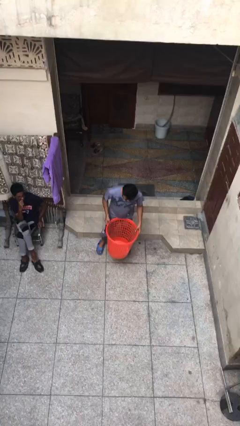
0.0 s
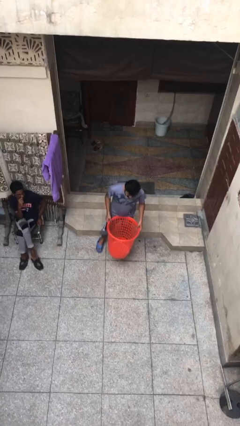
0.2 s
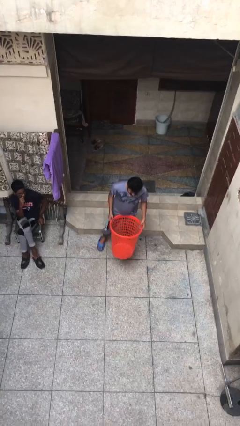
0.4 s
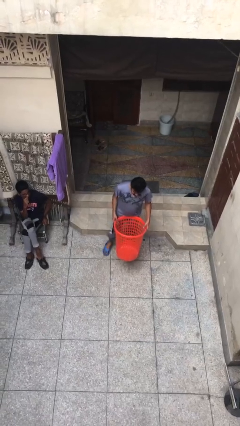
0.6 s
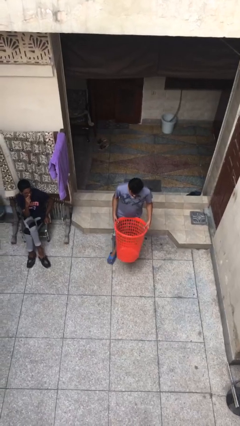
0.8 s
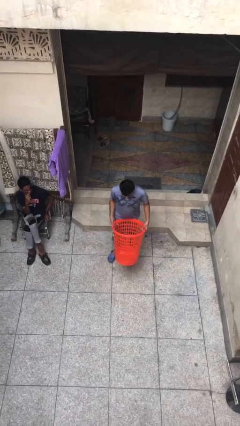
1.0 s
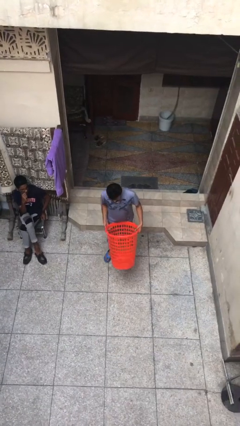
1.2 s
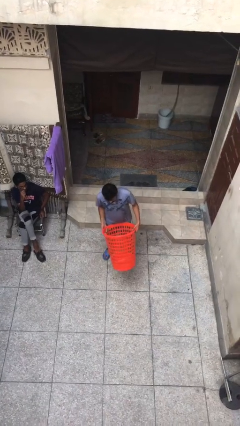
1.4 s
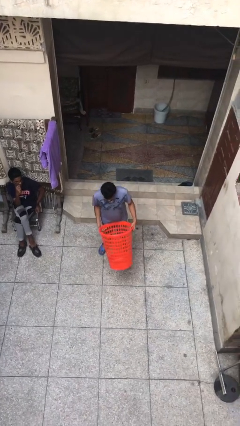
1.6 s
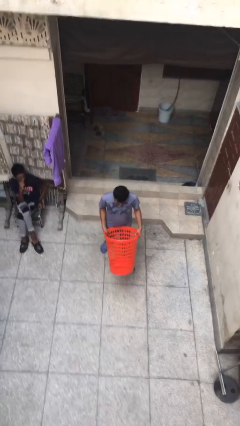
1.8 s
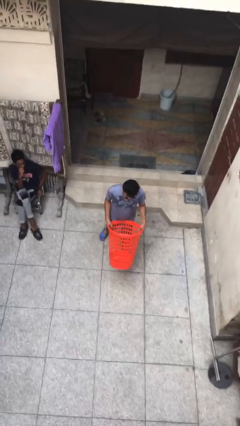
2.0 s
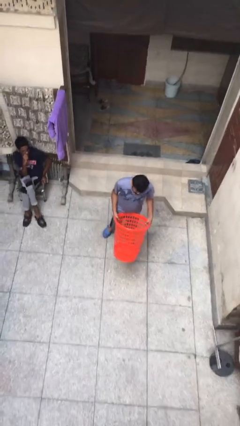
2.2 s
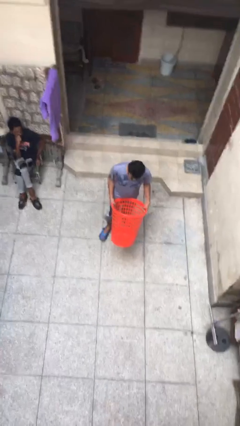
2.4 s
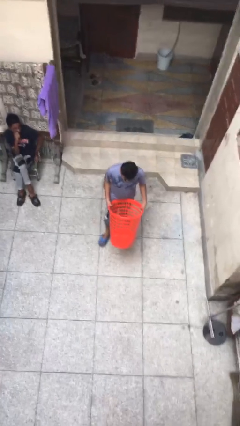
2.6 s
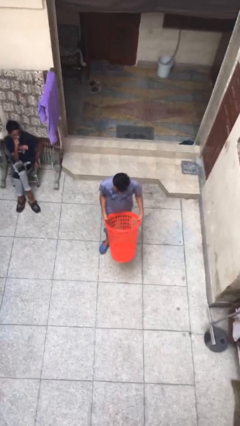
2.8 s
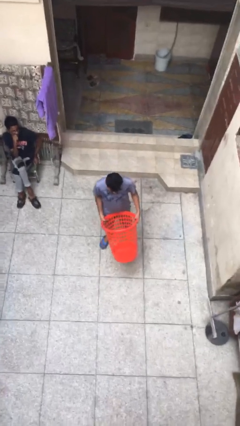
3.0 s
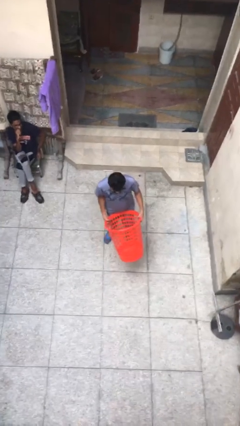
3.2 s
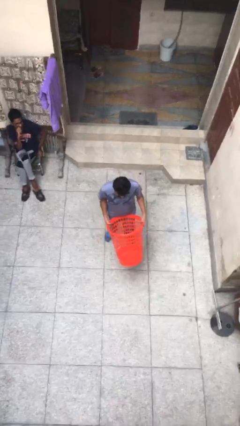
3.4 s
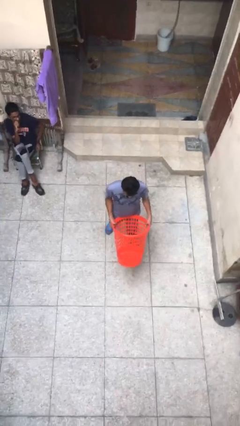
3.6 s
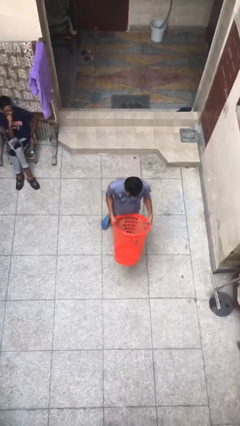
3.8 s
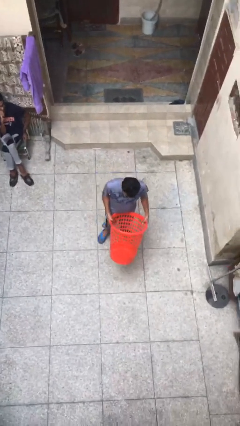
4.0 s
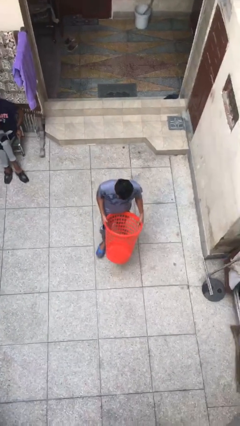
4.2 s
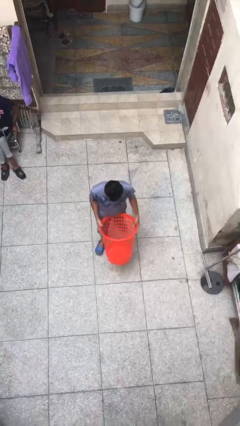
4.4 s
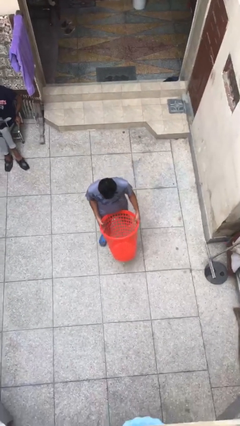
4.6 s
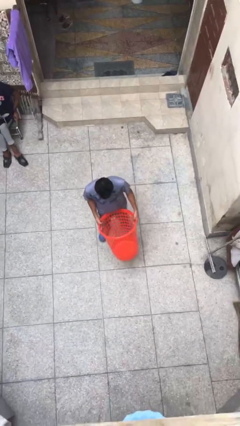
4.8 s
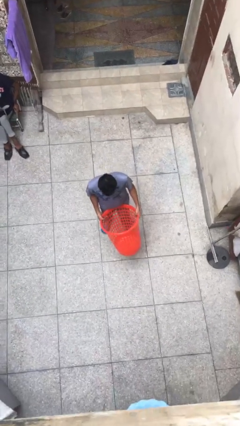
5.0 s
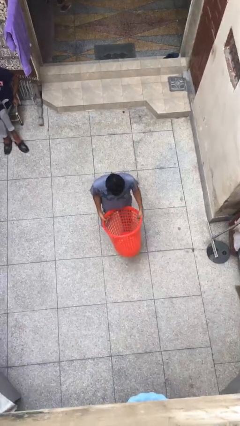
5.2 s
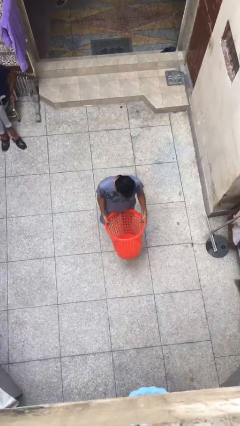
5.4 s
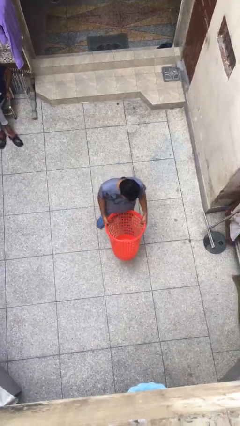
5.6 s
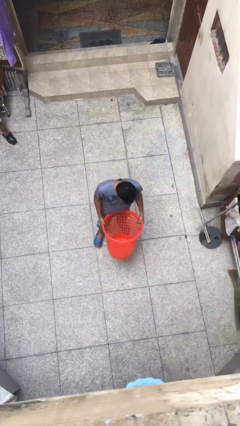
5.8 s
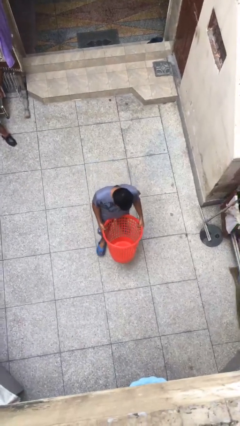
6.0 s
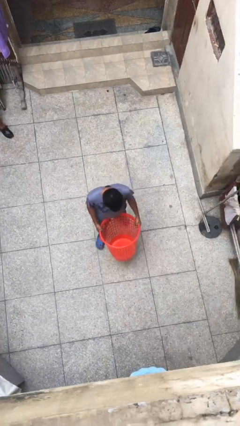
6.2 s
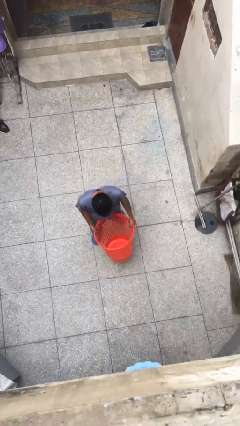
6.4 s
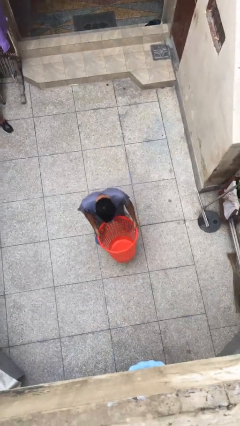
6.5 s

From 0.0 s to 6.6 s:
person carries heavy object

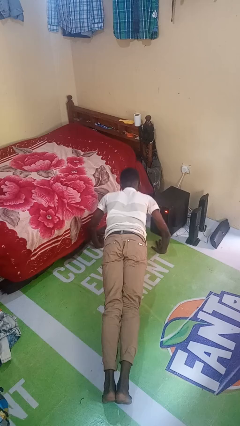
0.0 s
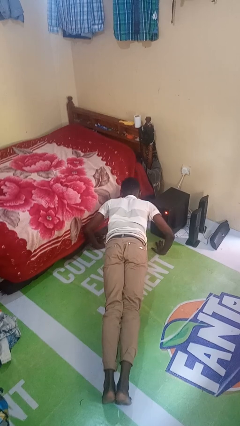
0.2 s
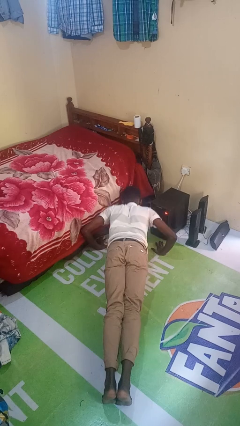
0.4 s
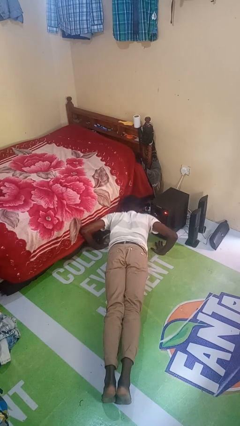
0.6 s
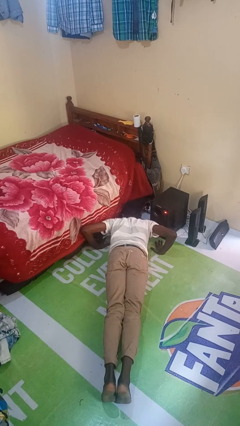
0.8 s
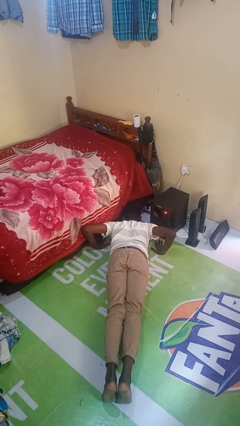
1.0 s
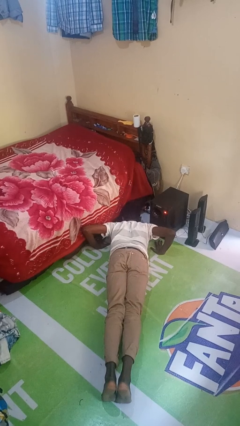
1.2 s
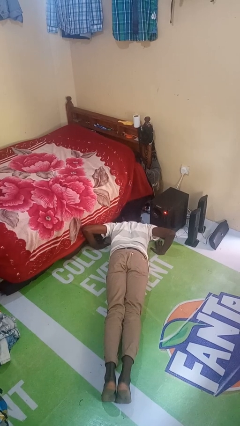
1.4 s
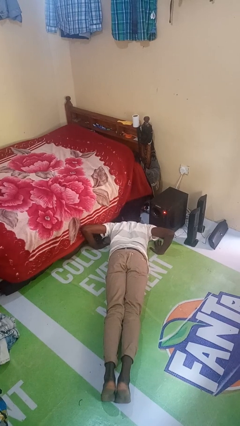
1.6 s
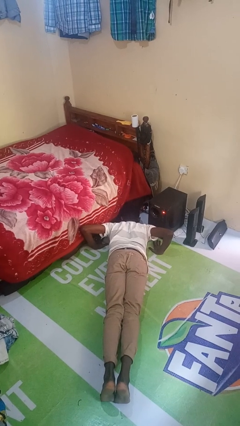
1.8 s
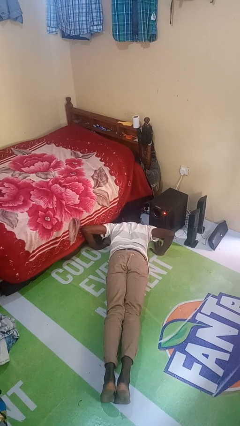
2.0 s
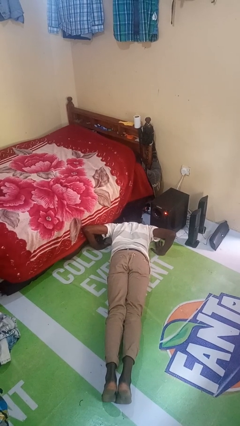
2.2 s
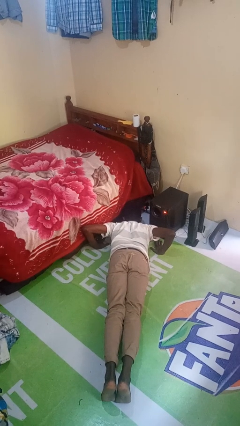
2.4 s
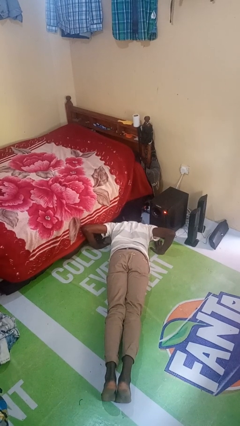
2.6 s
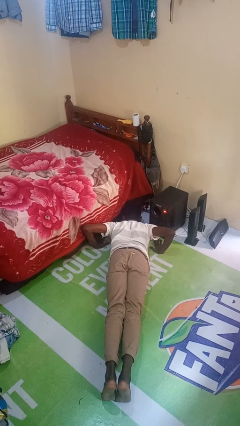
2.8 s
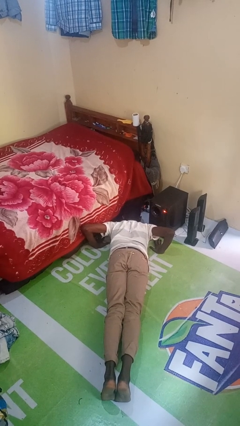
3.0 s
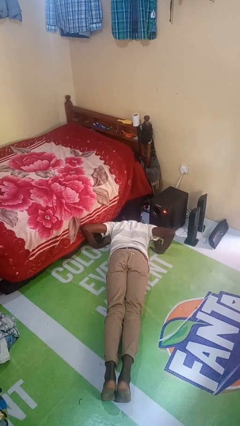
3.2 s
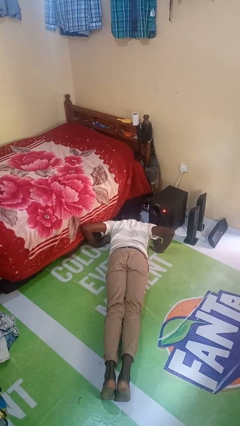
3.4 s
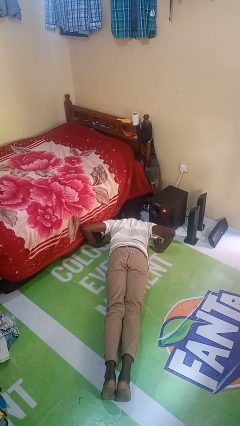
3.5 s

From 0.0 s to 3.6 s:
person exercises with pushup

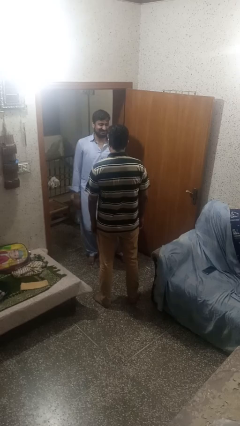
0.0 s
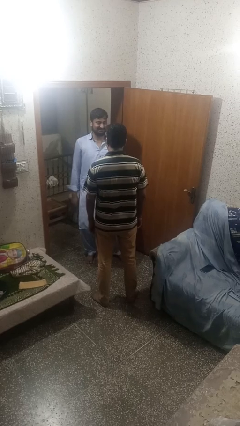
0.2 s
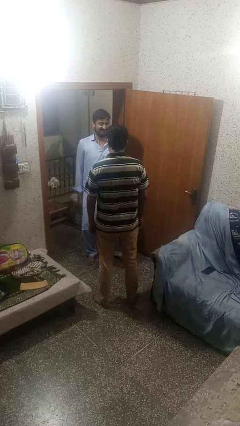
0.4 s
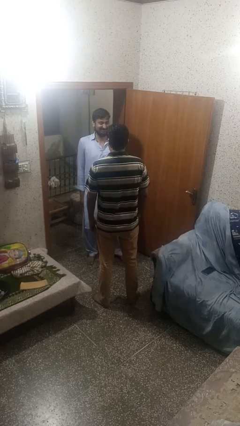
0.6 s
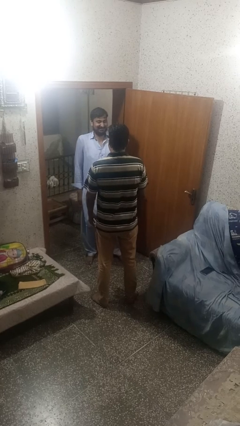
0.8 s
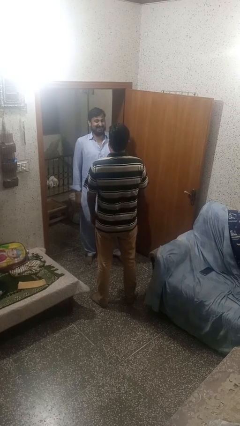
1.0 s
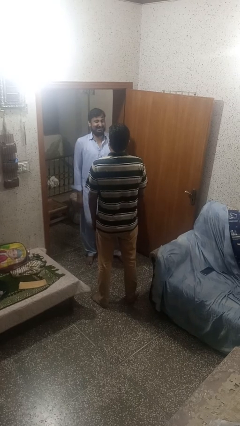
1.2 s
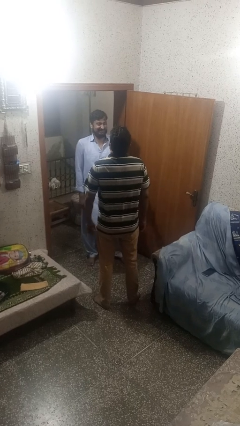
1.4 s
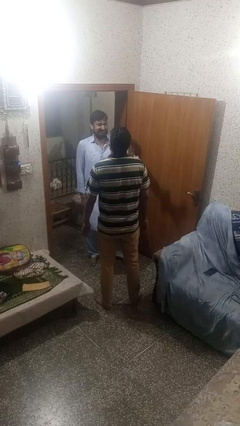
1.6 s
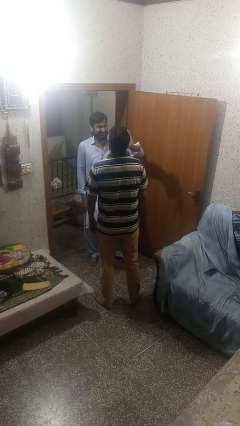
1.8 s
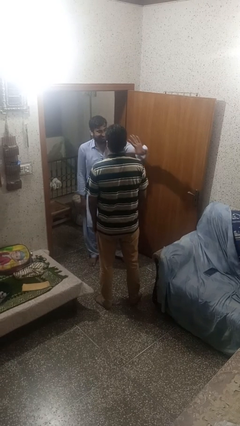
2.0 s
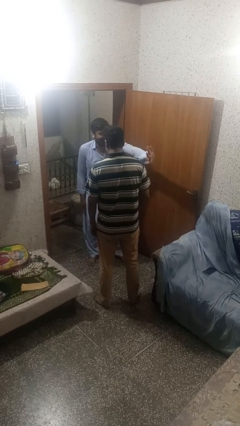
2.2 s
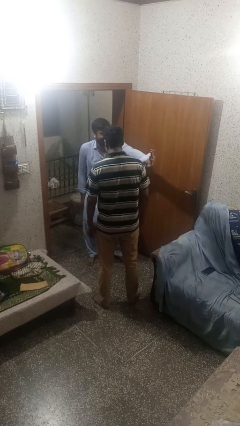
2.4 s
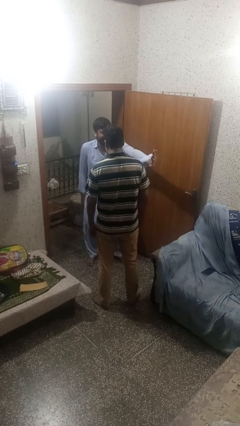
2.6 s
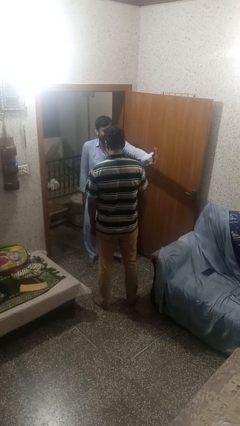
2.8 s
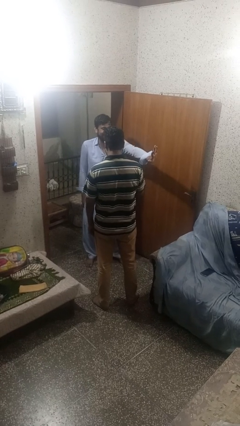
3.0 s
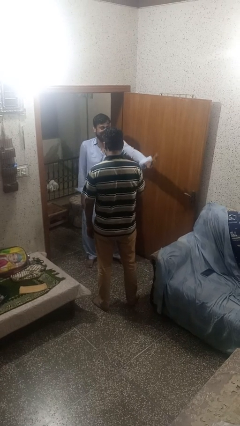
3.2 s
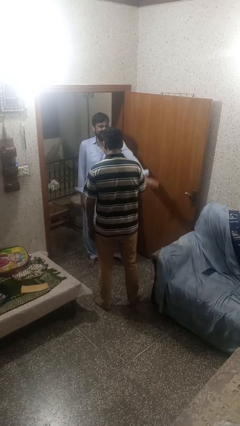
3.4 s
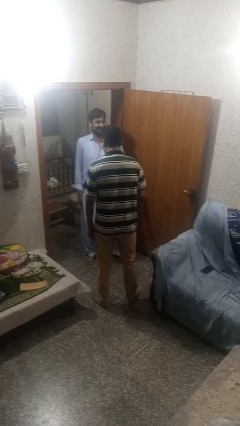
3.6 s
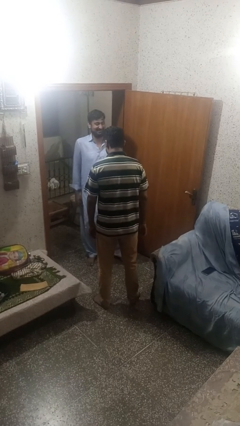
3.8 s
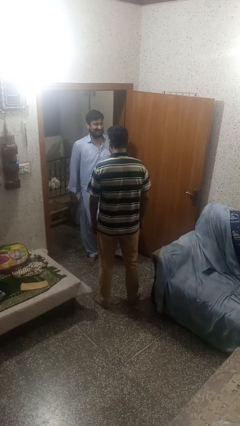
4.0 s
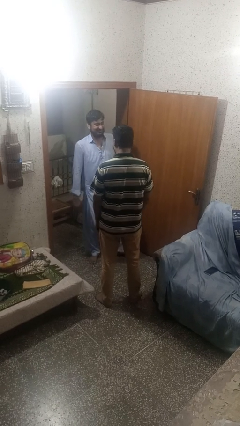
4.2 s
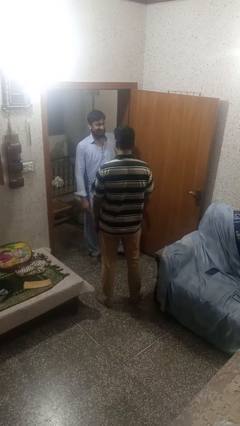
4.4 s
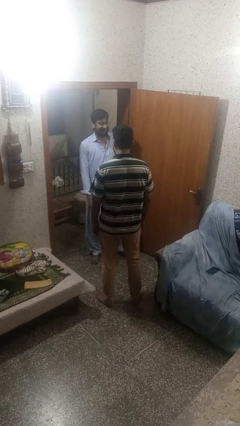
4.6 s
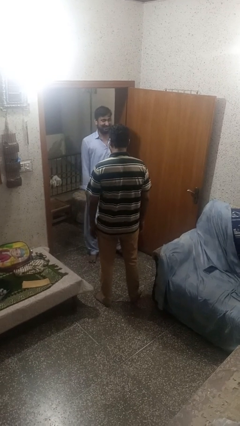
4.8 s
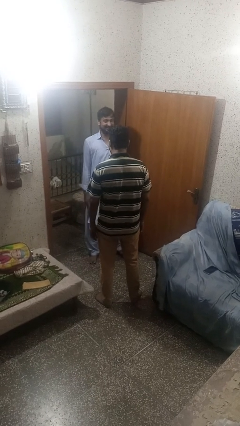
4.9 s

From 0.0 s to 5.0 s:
person laughs with person

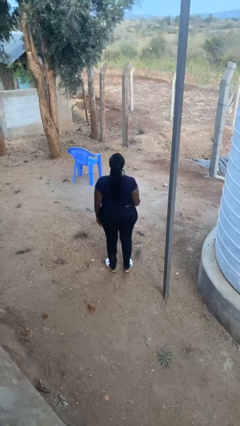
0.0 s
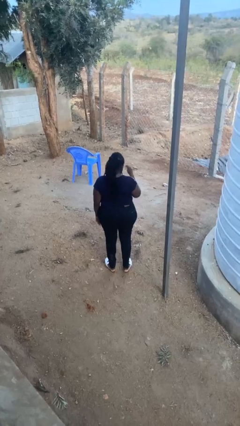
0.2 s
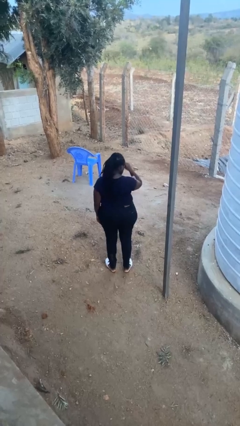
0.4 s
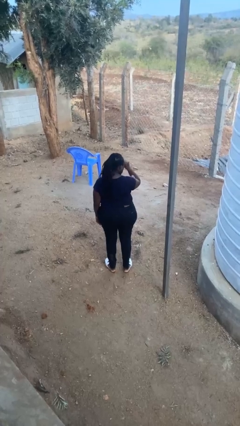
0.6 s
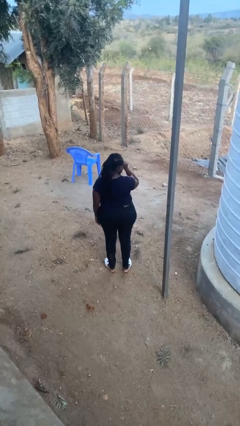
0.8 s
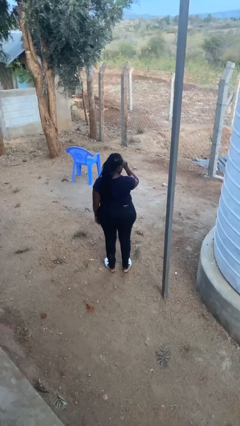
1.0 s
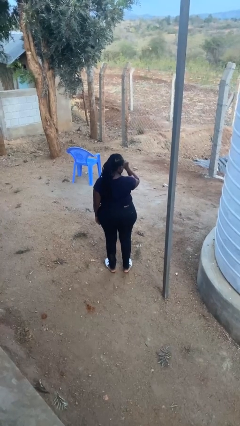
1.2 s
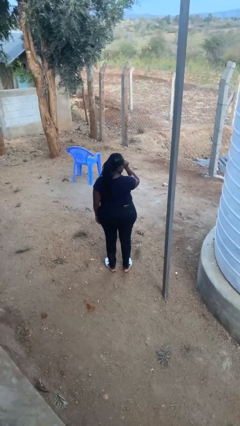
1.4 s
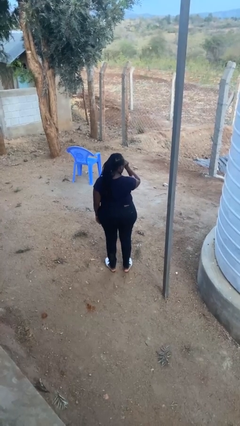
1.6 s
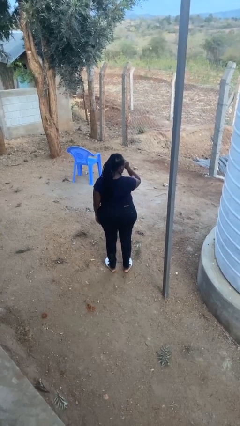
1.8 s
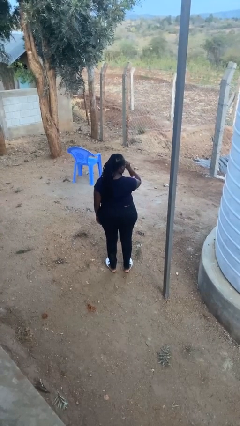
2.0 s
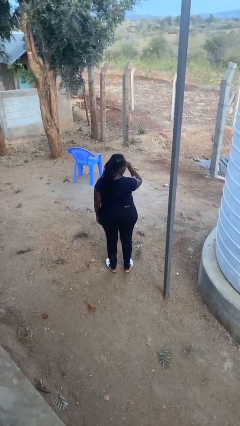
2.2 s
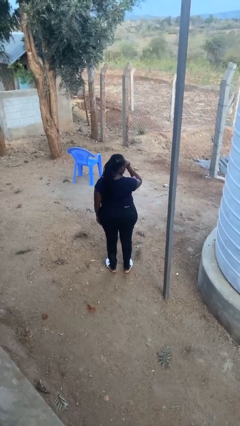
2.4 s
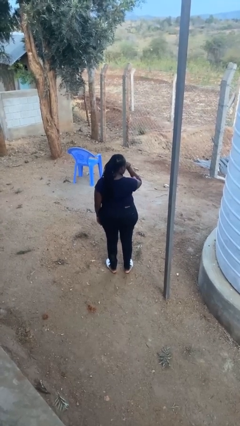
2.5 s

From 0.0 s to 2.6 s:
person rubs eyes

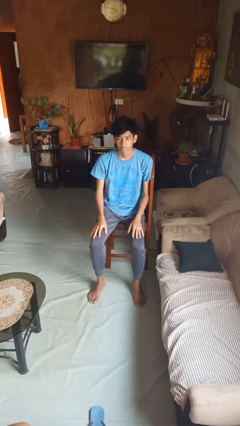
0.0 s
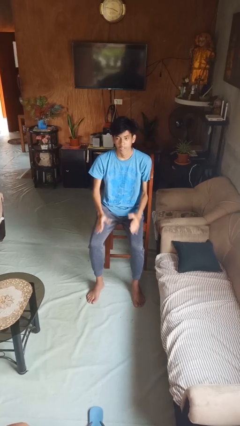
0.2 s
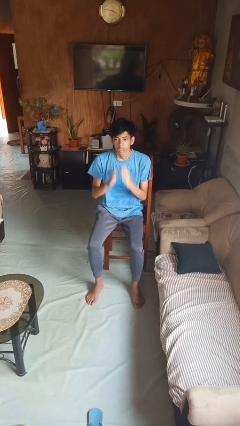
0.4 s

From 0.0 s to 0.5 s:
person sneezes into hand
